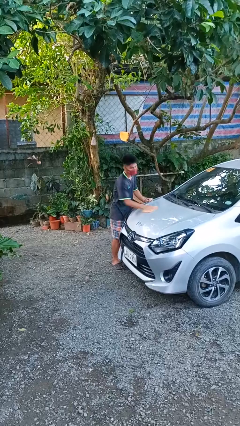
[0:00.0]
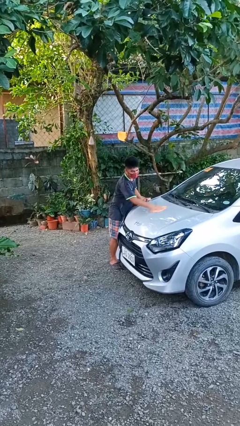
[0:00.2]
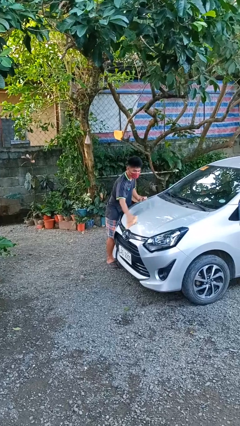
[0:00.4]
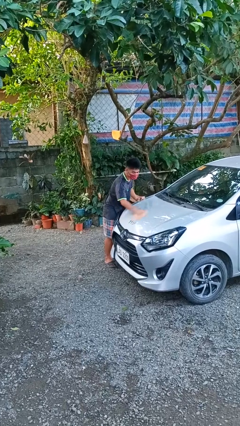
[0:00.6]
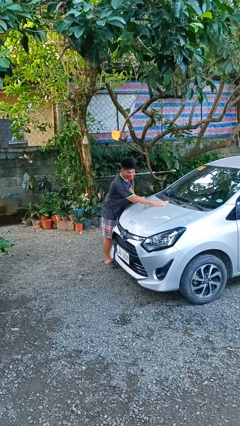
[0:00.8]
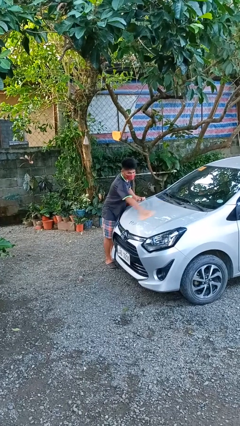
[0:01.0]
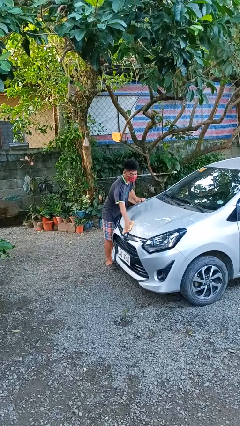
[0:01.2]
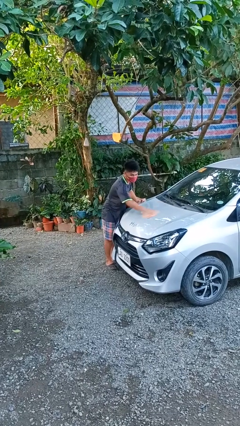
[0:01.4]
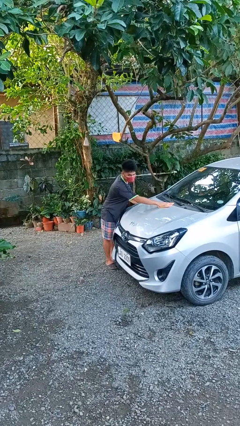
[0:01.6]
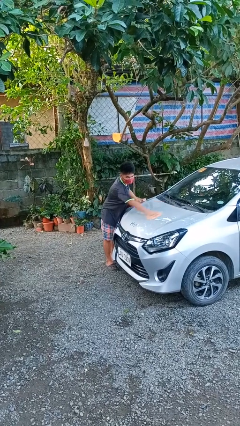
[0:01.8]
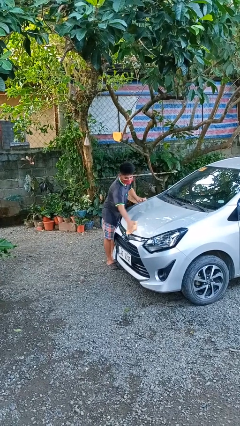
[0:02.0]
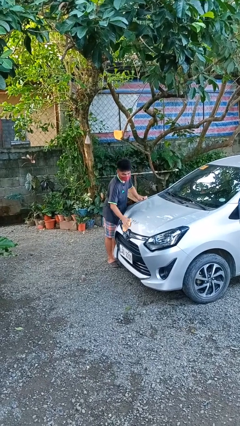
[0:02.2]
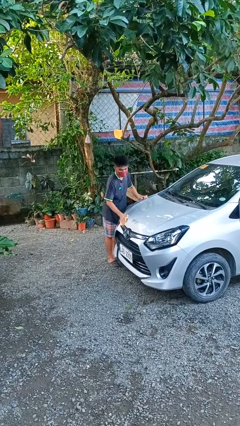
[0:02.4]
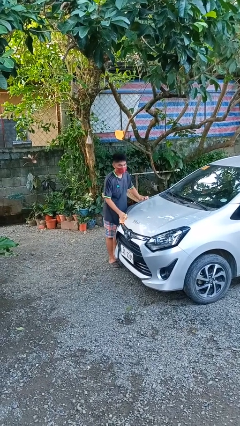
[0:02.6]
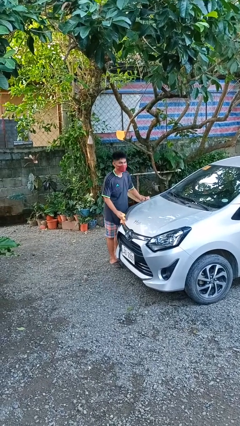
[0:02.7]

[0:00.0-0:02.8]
person polishes car with rag

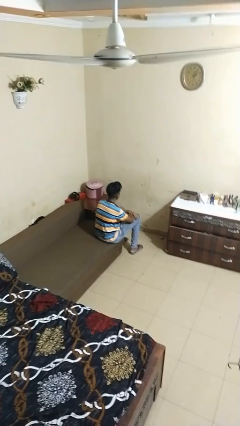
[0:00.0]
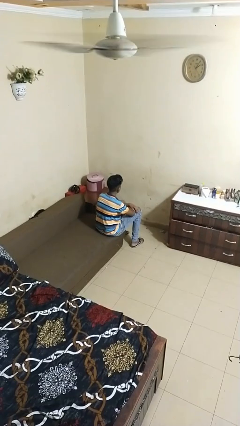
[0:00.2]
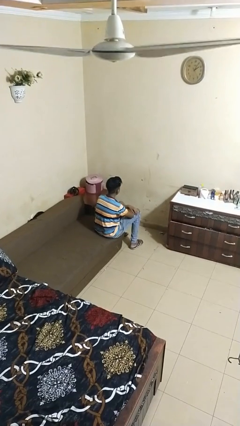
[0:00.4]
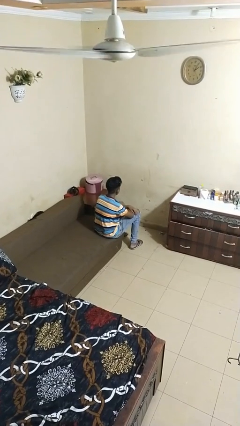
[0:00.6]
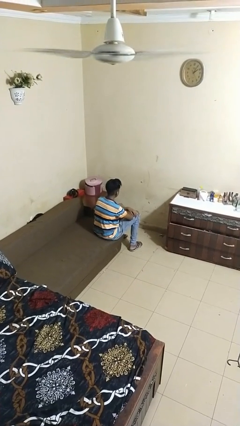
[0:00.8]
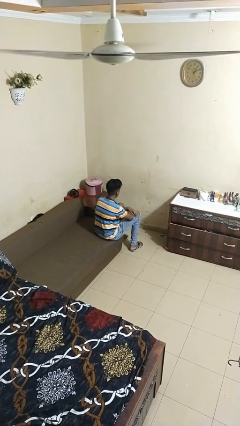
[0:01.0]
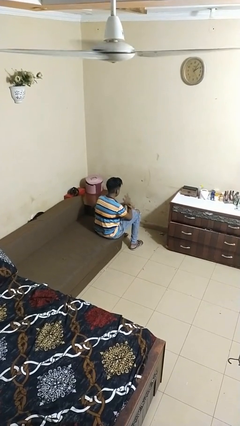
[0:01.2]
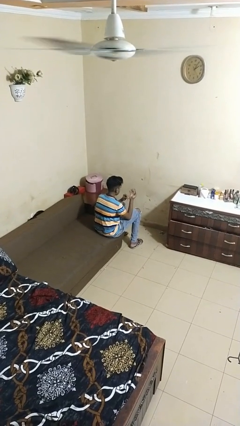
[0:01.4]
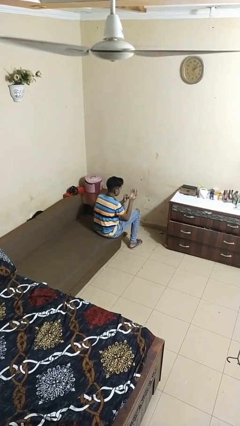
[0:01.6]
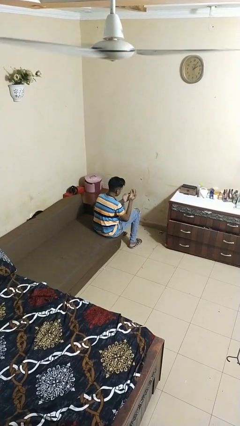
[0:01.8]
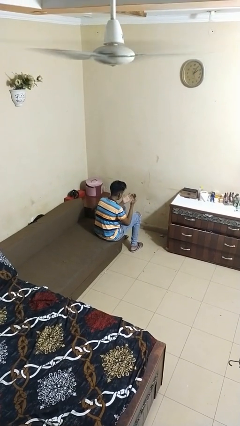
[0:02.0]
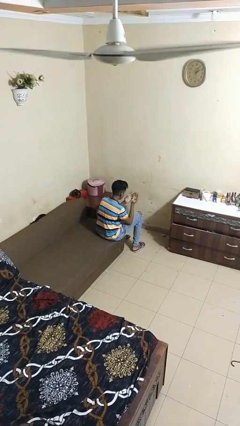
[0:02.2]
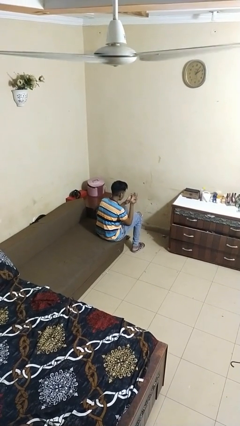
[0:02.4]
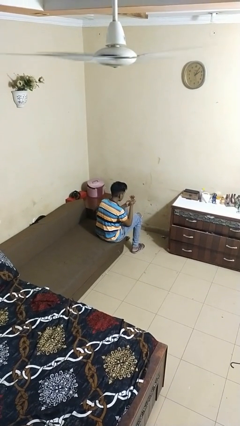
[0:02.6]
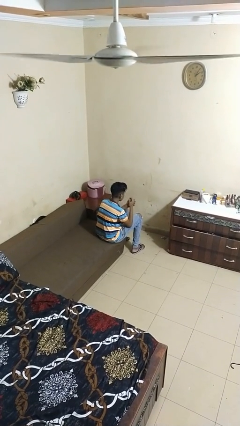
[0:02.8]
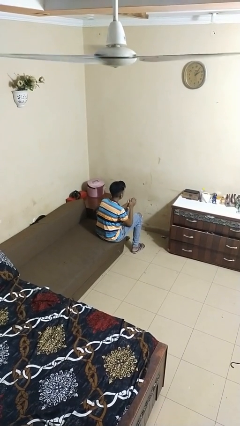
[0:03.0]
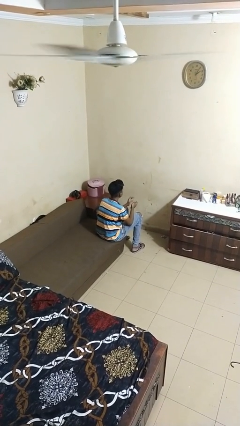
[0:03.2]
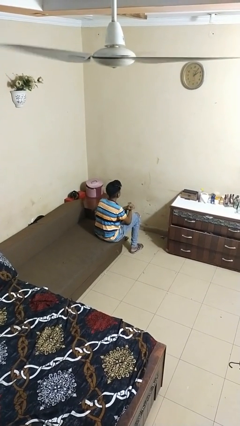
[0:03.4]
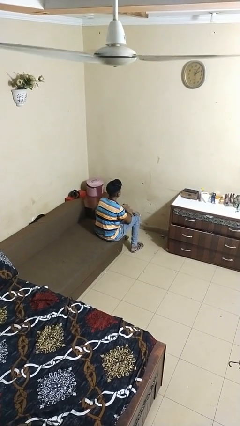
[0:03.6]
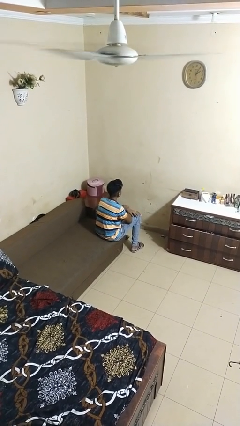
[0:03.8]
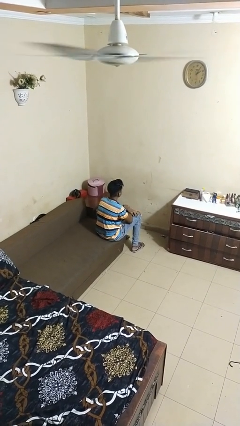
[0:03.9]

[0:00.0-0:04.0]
person looks at hands in lap

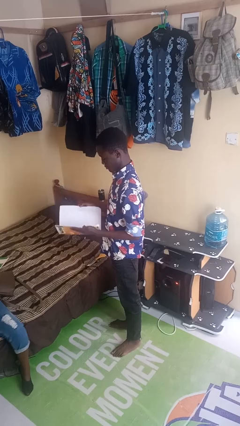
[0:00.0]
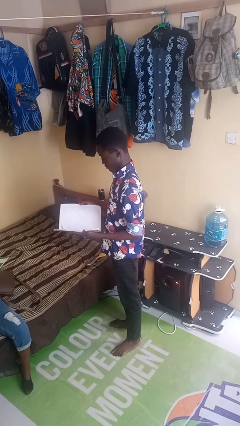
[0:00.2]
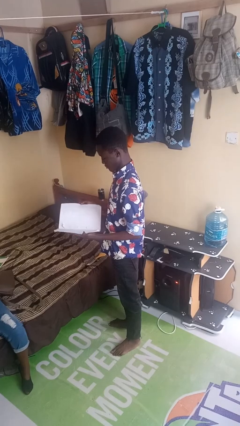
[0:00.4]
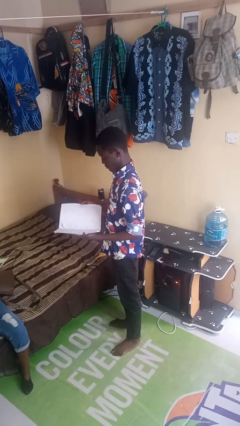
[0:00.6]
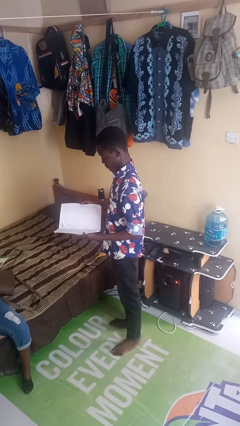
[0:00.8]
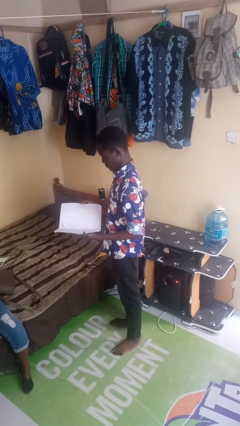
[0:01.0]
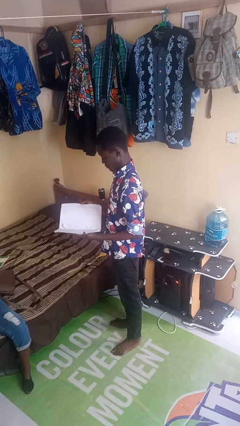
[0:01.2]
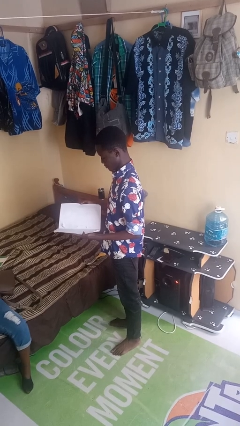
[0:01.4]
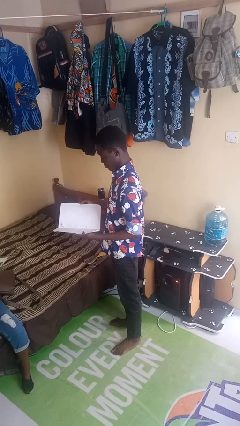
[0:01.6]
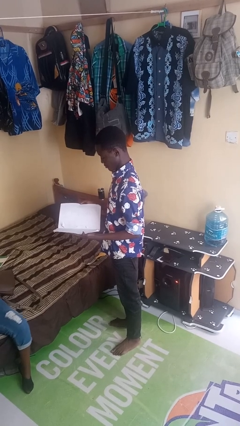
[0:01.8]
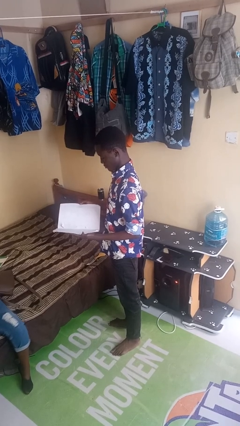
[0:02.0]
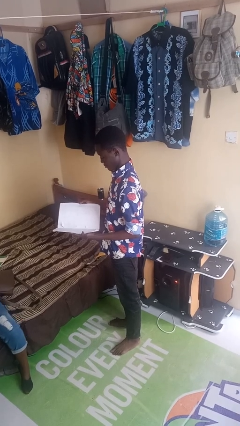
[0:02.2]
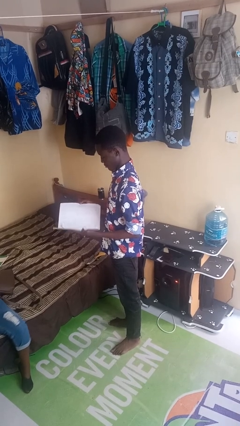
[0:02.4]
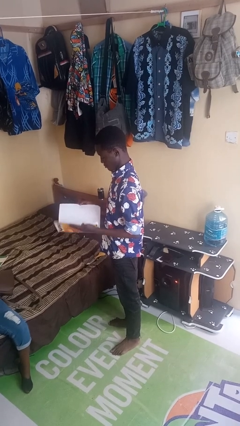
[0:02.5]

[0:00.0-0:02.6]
person reads book

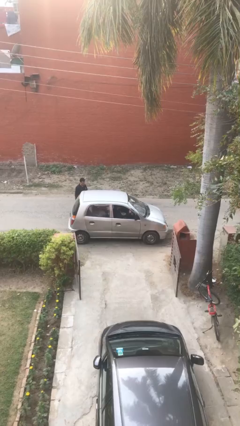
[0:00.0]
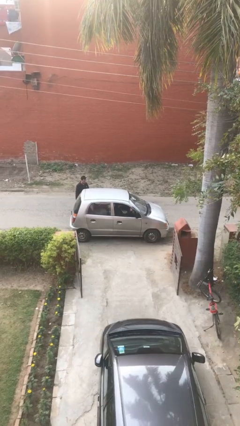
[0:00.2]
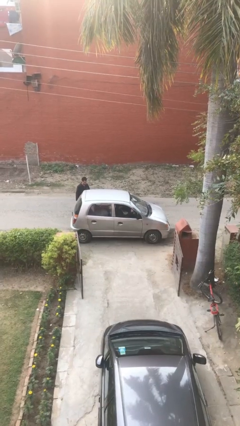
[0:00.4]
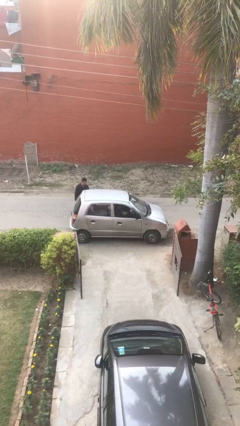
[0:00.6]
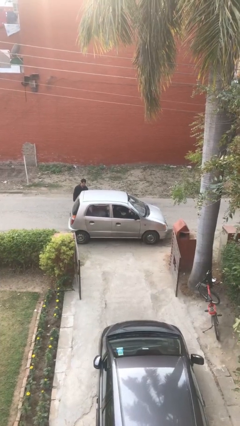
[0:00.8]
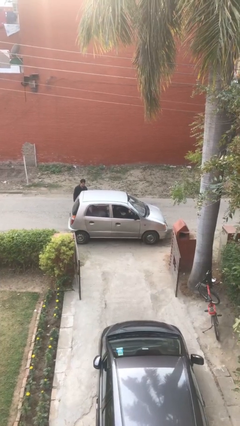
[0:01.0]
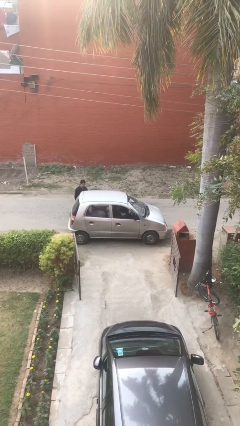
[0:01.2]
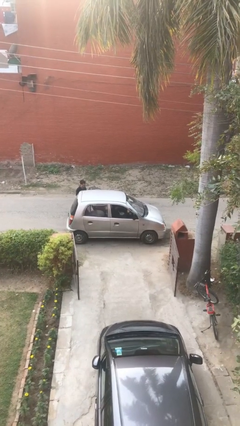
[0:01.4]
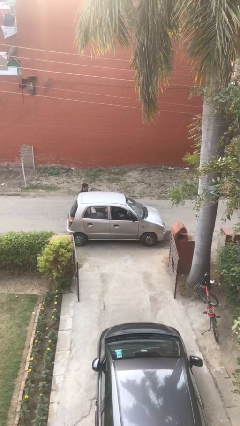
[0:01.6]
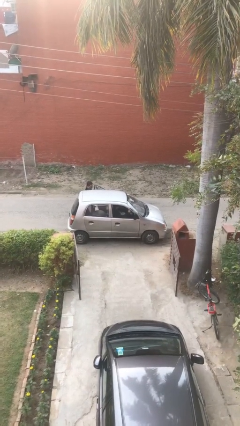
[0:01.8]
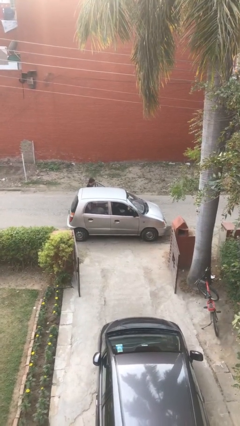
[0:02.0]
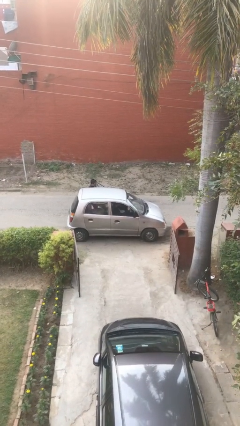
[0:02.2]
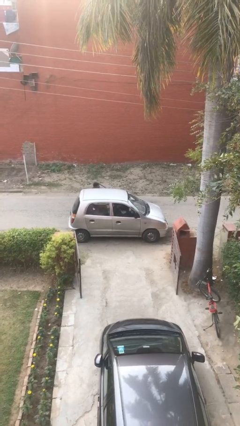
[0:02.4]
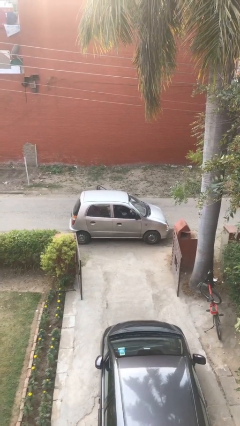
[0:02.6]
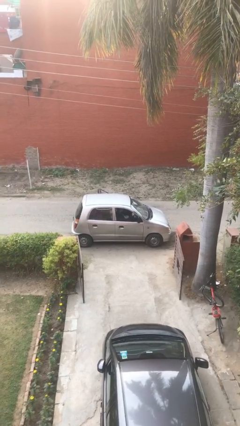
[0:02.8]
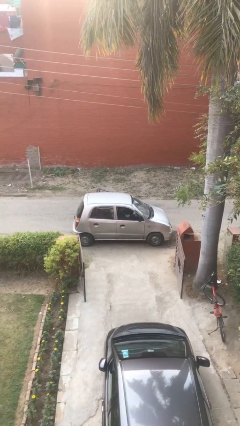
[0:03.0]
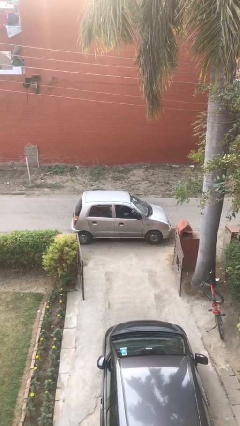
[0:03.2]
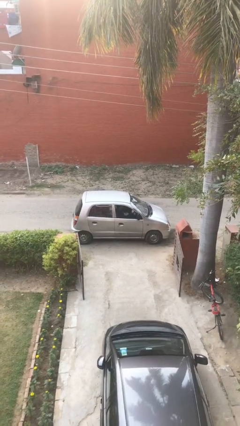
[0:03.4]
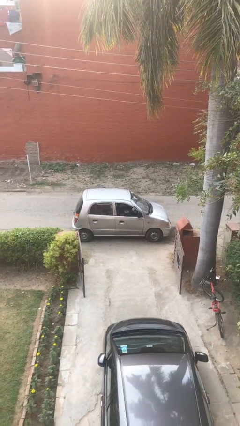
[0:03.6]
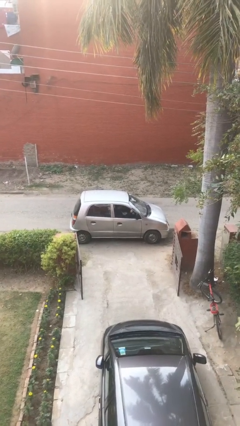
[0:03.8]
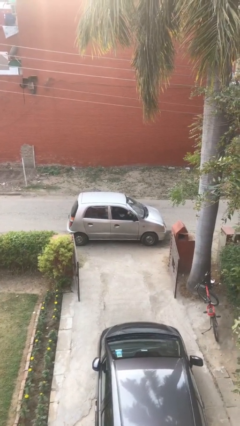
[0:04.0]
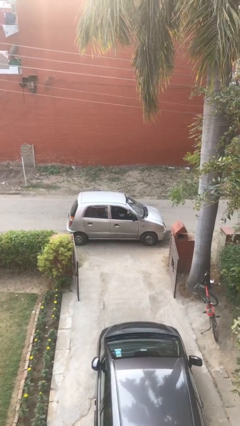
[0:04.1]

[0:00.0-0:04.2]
car picks up person

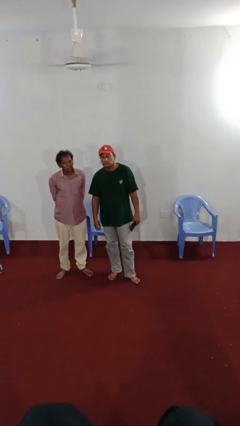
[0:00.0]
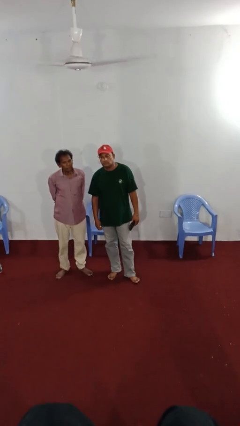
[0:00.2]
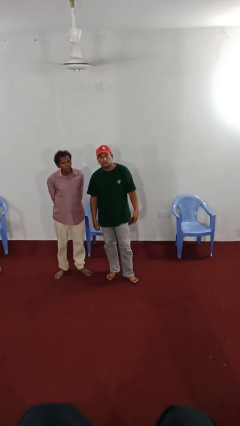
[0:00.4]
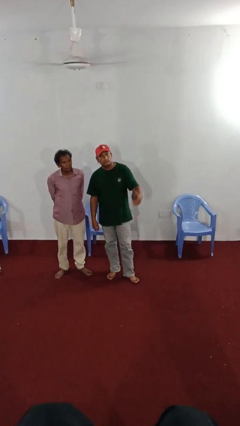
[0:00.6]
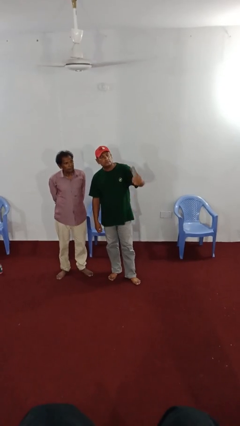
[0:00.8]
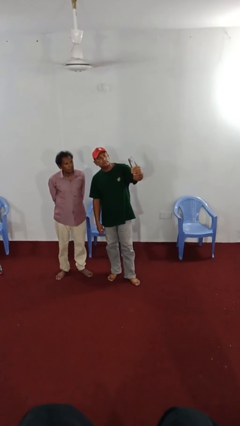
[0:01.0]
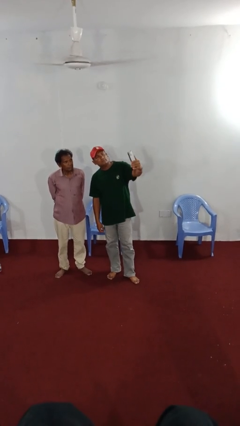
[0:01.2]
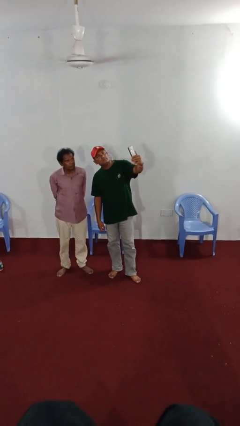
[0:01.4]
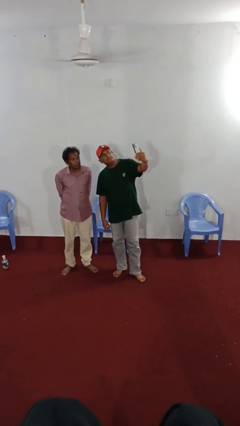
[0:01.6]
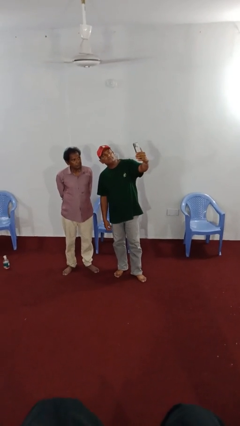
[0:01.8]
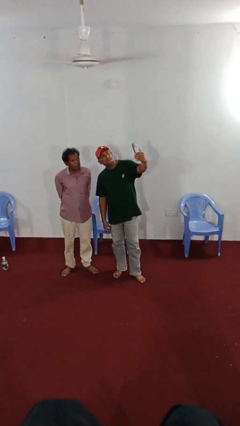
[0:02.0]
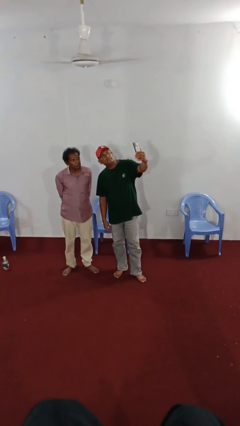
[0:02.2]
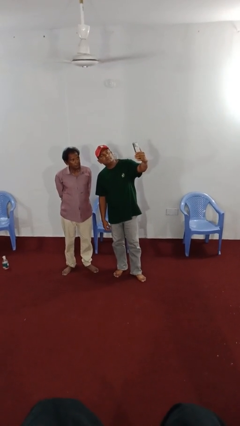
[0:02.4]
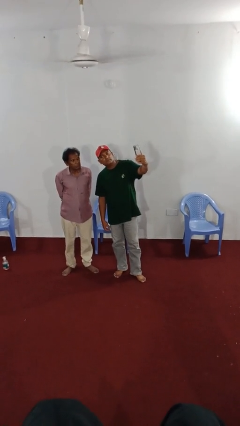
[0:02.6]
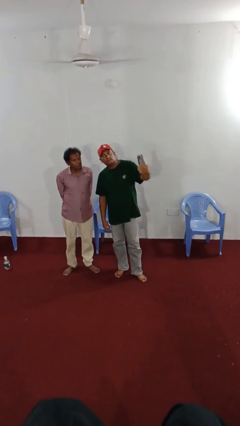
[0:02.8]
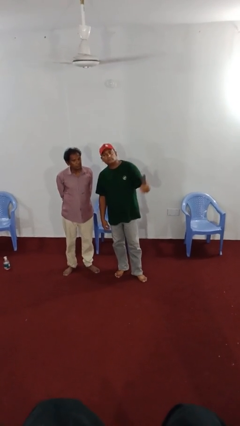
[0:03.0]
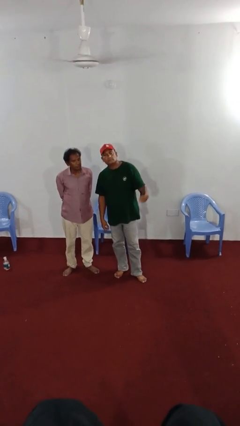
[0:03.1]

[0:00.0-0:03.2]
person takes selfie with person

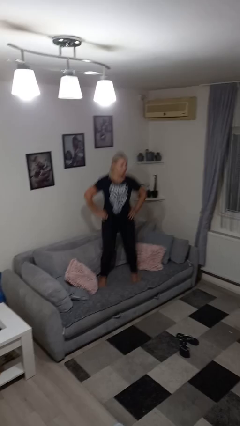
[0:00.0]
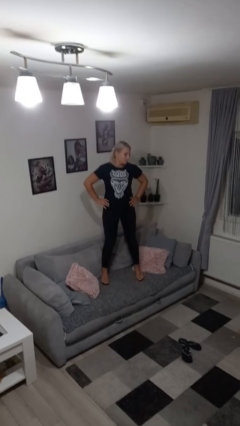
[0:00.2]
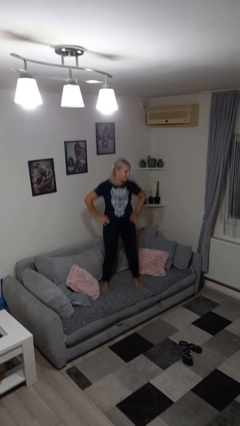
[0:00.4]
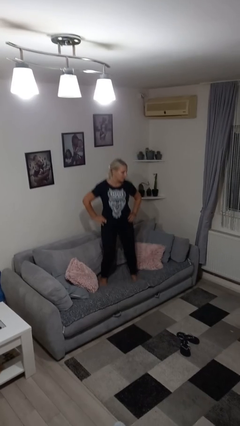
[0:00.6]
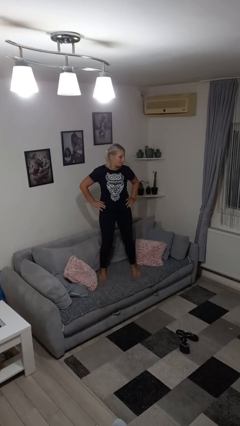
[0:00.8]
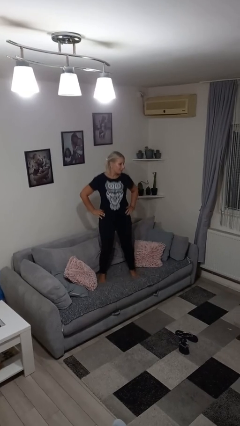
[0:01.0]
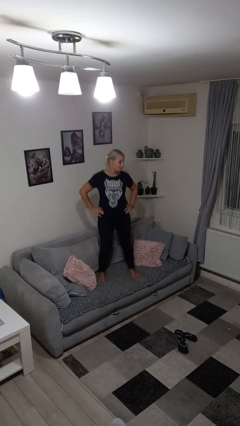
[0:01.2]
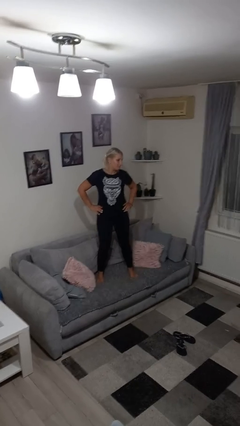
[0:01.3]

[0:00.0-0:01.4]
person jumps on couch
